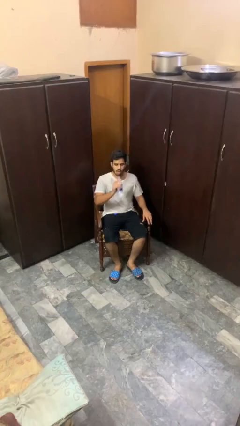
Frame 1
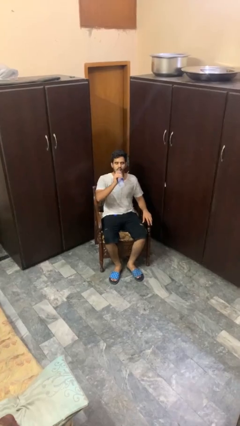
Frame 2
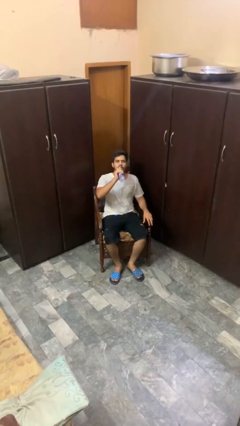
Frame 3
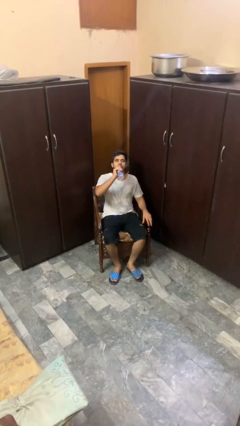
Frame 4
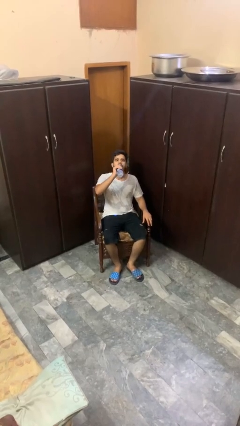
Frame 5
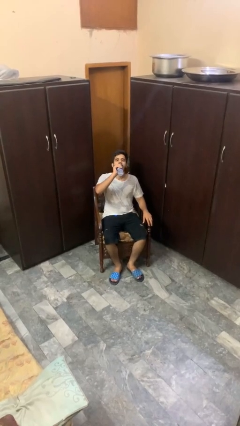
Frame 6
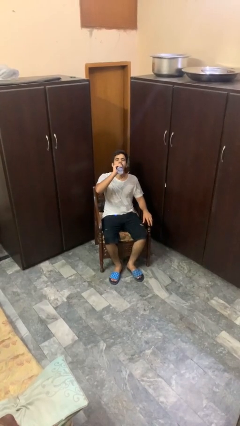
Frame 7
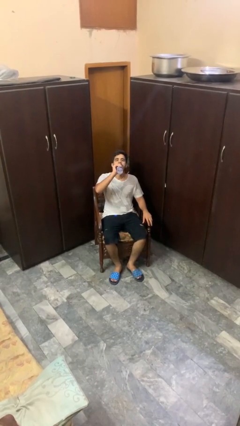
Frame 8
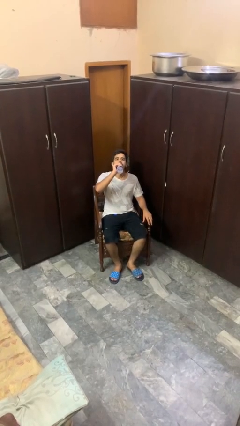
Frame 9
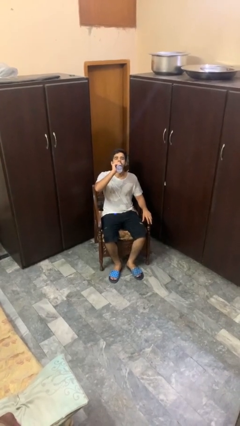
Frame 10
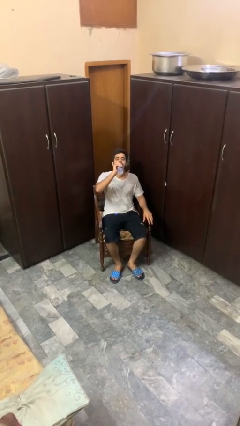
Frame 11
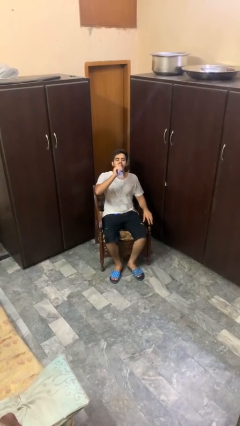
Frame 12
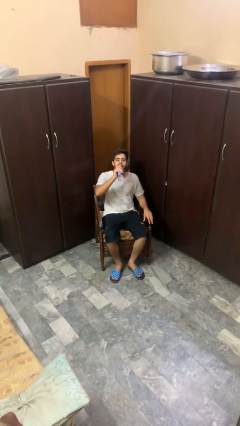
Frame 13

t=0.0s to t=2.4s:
person drinks from bottle

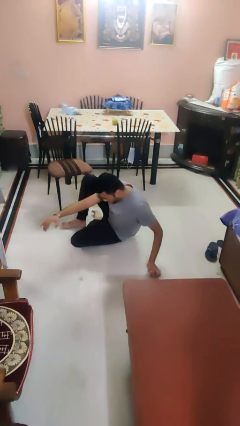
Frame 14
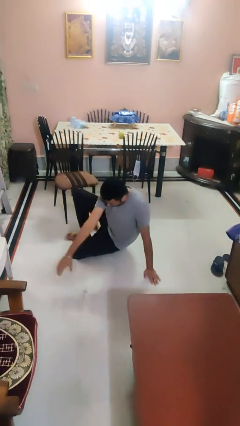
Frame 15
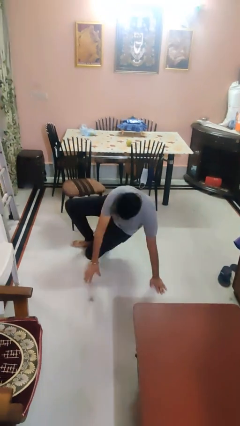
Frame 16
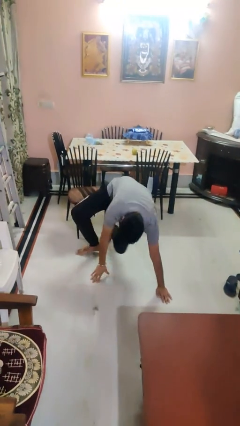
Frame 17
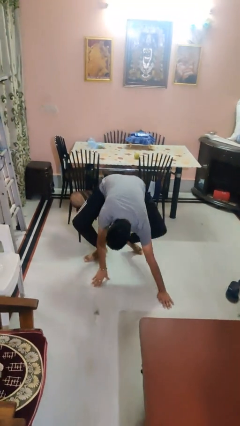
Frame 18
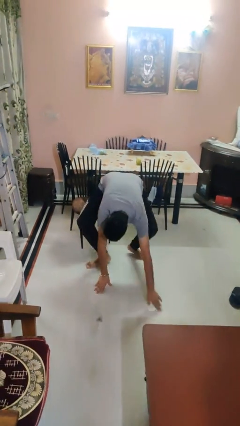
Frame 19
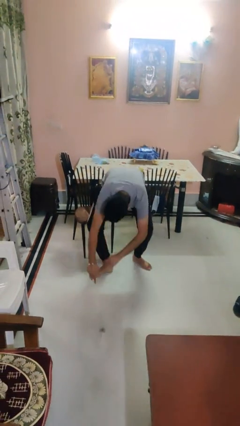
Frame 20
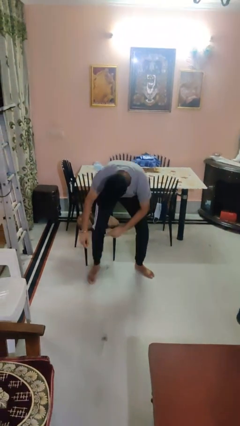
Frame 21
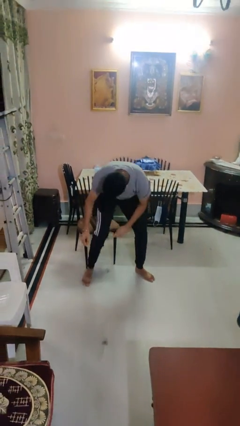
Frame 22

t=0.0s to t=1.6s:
person stands up from floor

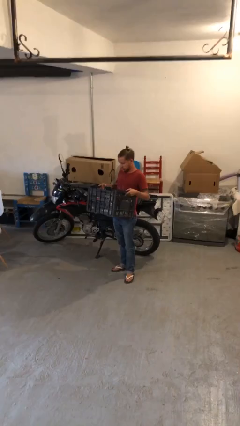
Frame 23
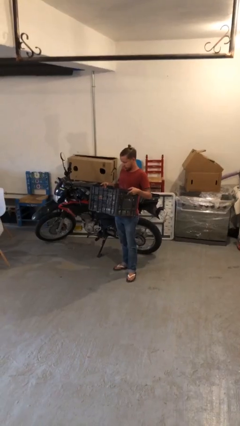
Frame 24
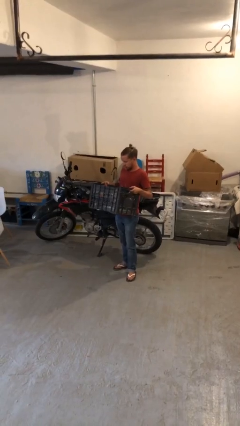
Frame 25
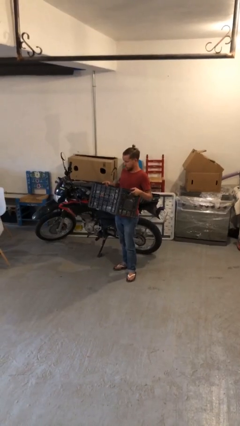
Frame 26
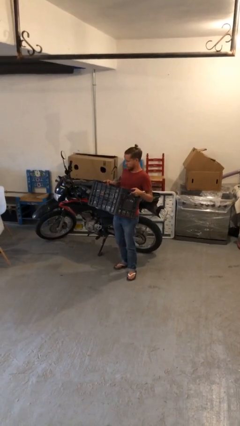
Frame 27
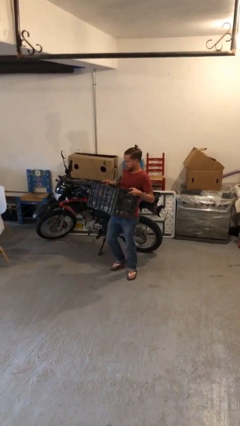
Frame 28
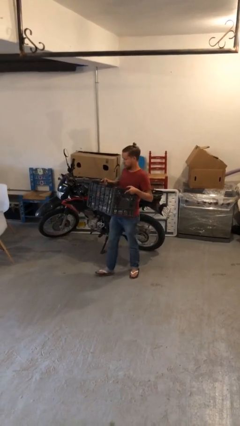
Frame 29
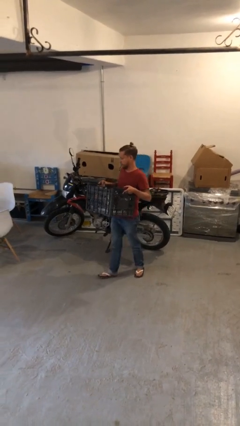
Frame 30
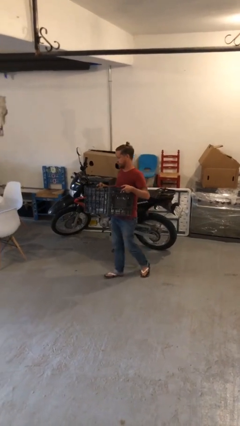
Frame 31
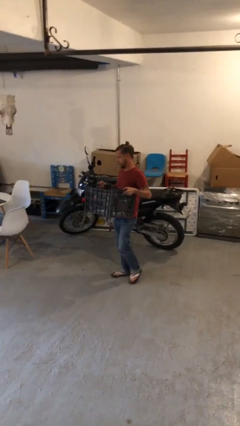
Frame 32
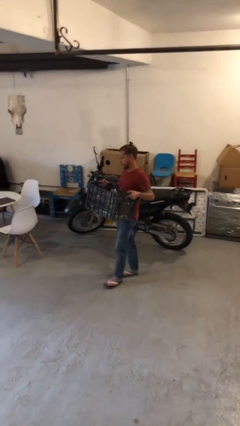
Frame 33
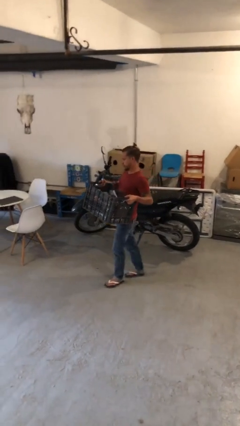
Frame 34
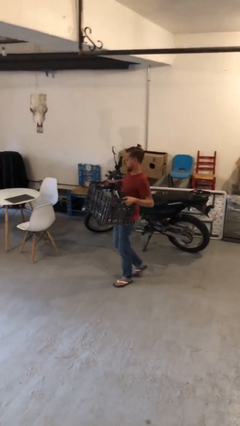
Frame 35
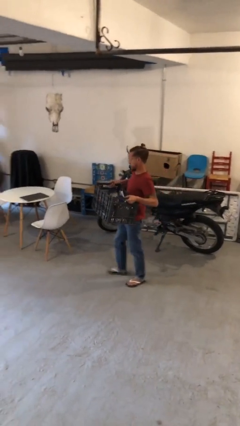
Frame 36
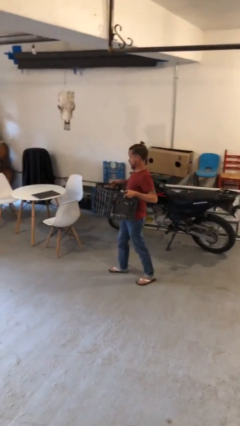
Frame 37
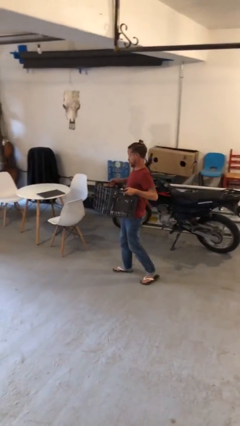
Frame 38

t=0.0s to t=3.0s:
person carries heavy object

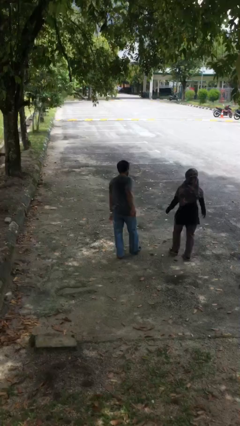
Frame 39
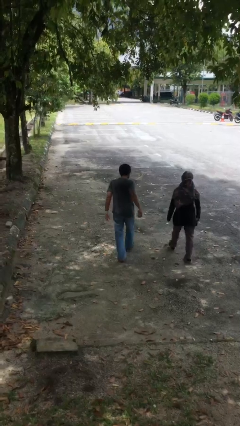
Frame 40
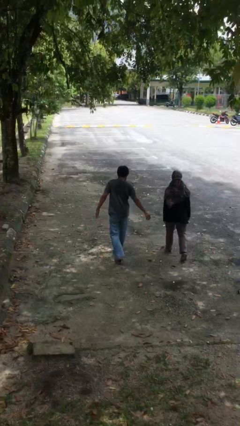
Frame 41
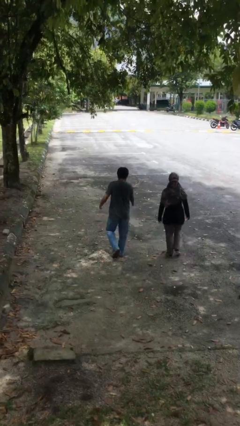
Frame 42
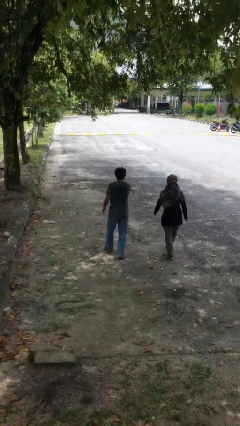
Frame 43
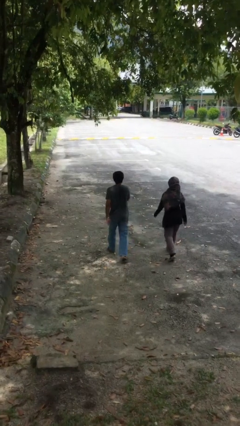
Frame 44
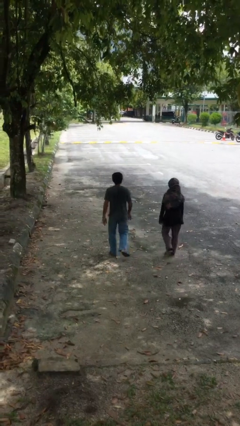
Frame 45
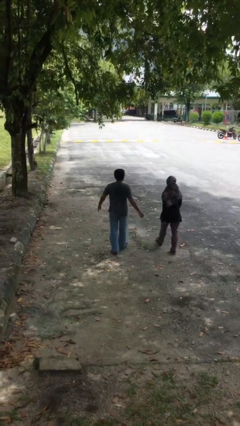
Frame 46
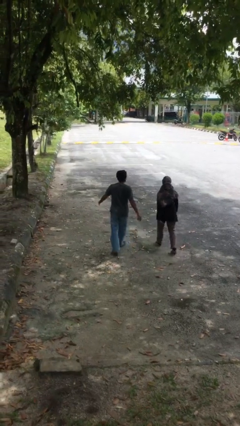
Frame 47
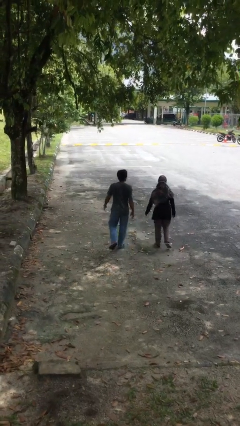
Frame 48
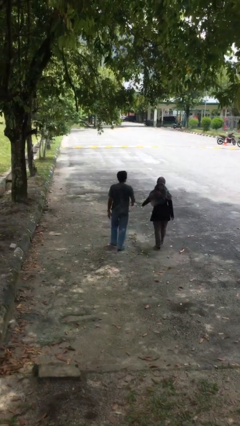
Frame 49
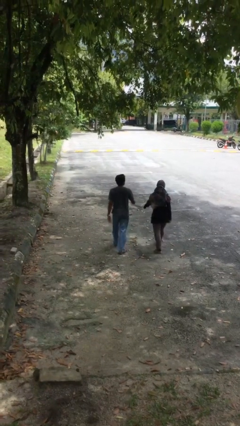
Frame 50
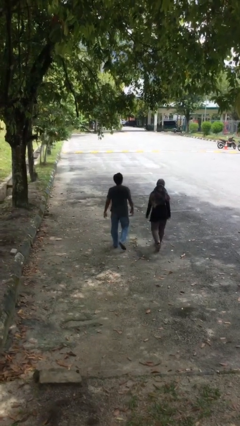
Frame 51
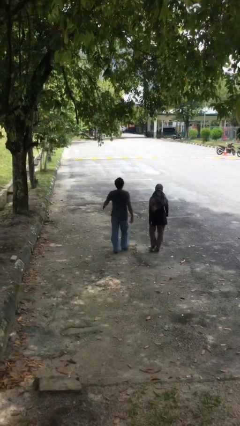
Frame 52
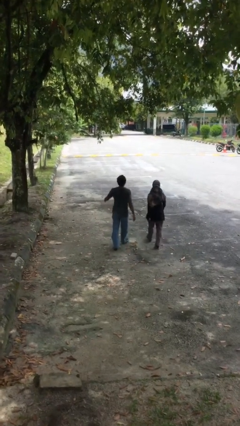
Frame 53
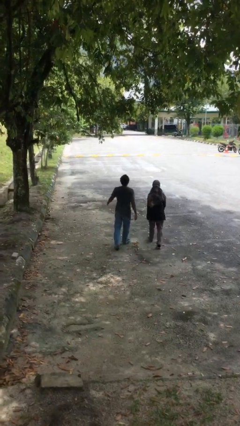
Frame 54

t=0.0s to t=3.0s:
person talks to person

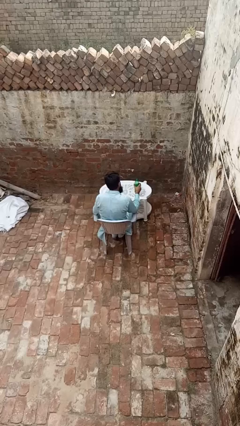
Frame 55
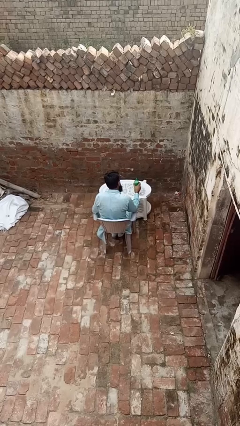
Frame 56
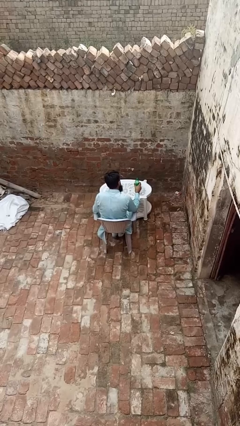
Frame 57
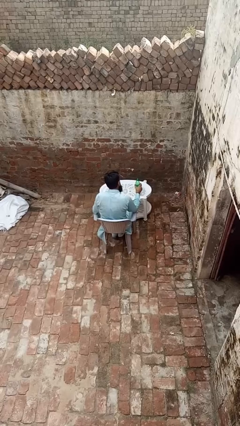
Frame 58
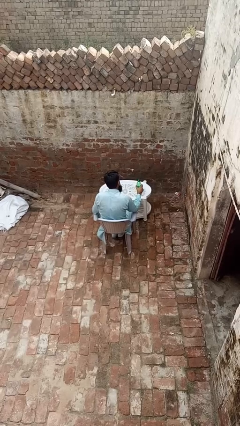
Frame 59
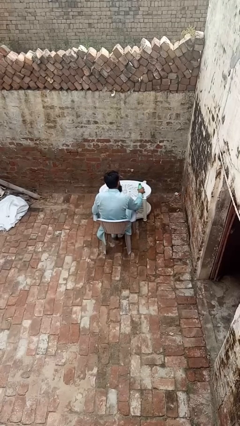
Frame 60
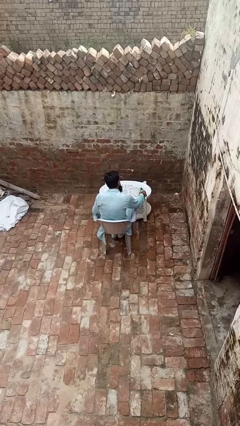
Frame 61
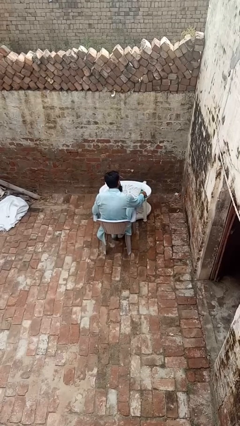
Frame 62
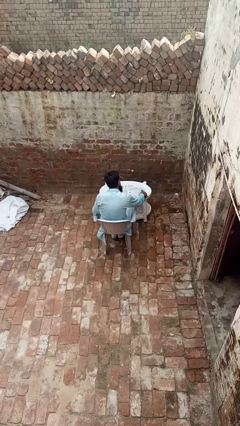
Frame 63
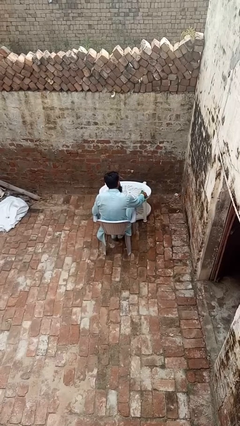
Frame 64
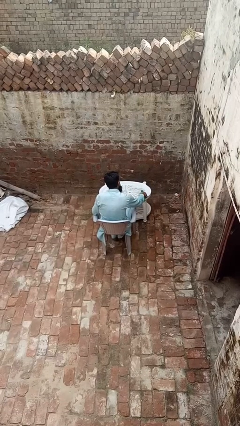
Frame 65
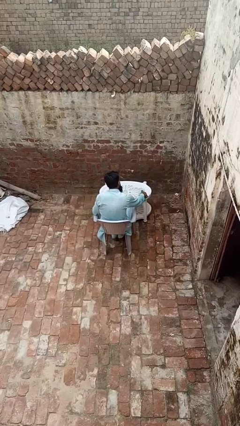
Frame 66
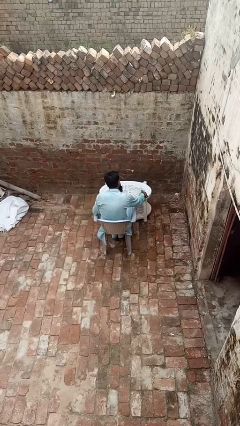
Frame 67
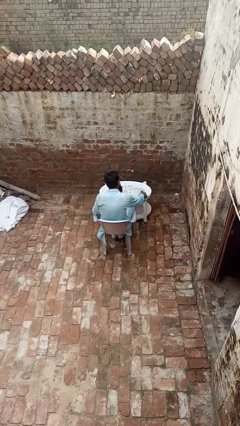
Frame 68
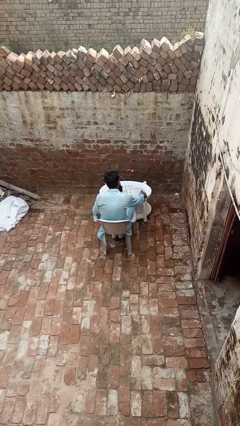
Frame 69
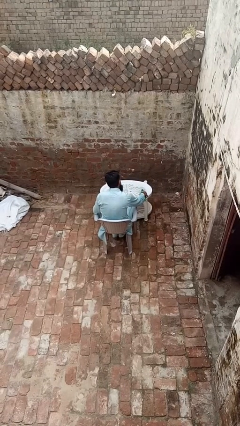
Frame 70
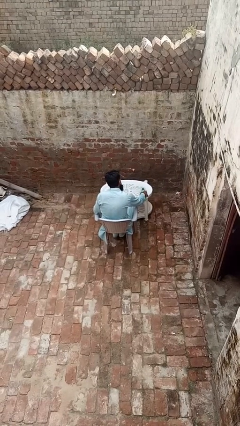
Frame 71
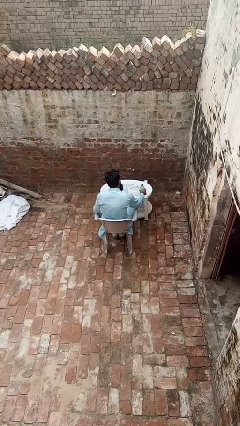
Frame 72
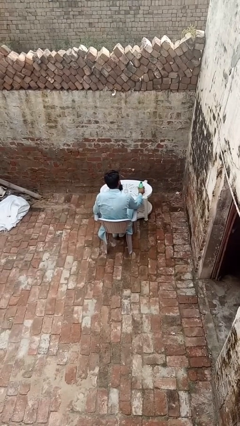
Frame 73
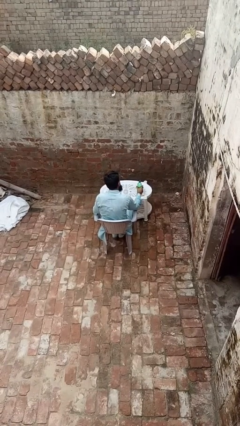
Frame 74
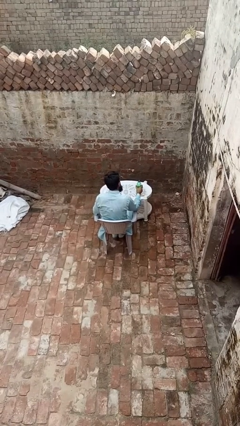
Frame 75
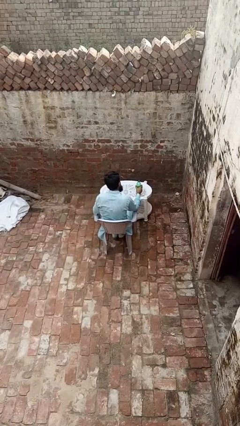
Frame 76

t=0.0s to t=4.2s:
person pours liquid into cup

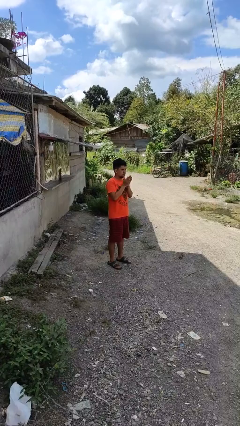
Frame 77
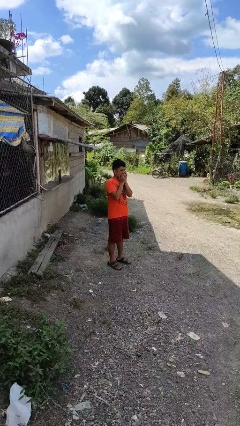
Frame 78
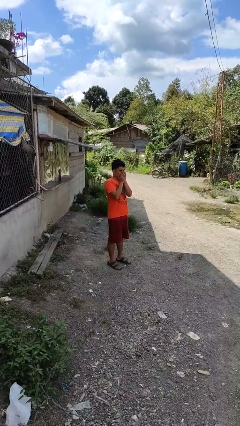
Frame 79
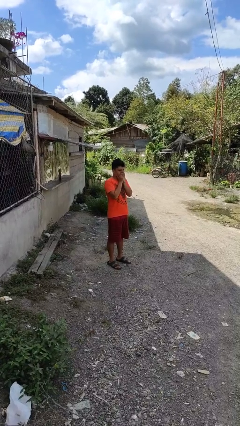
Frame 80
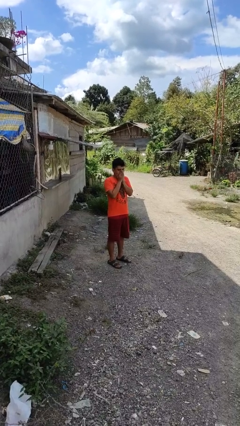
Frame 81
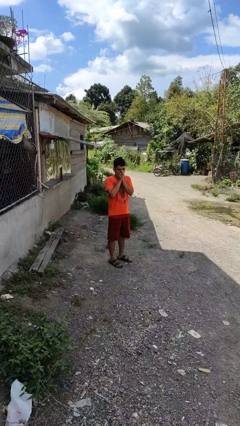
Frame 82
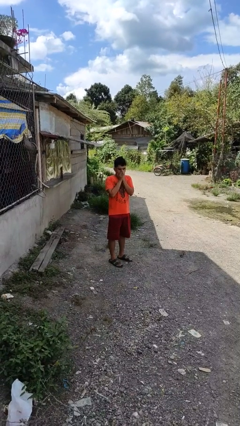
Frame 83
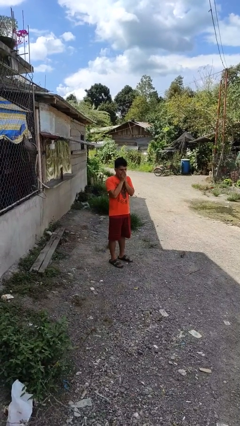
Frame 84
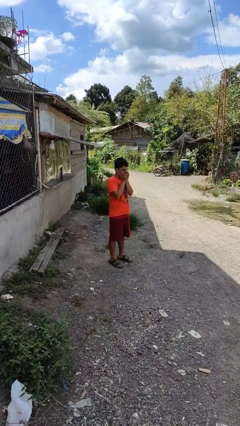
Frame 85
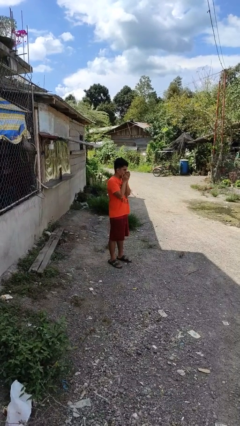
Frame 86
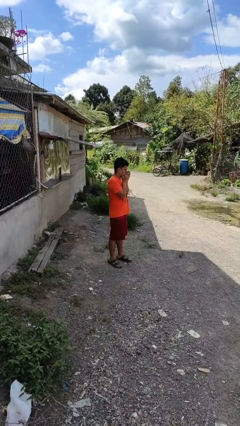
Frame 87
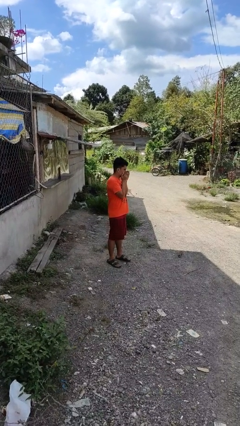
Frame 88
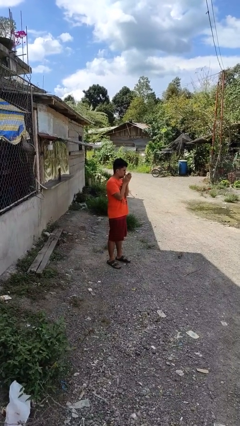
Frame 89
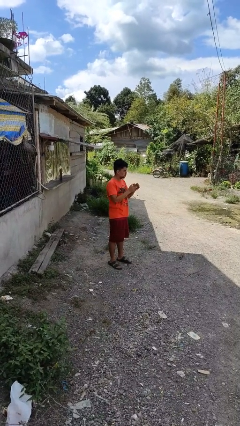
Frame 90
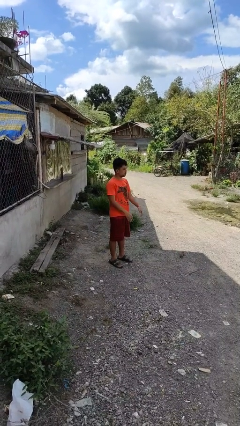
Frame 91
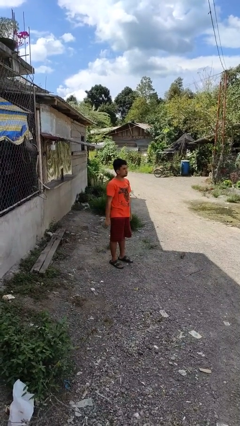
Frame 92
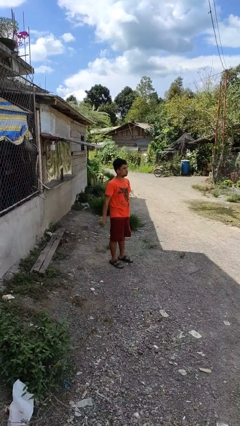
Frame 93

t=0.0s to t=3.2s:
person blows into hands
